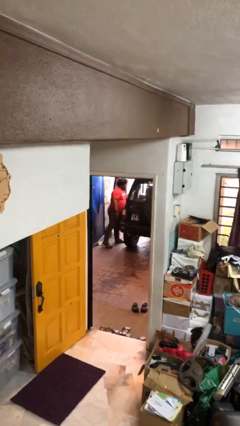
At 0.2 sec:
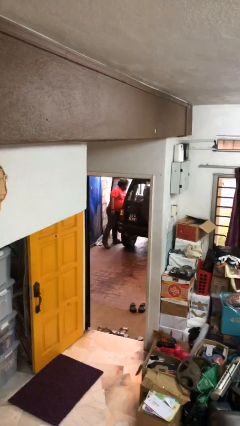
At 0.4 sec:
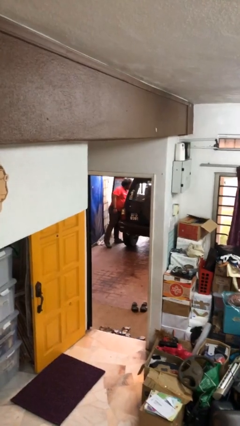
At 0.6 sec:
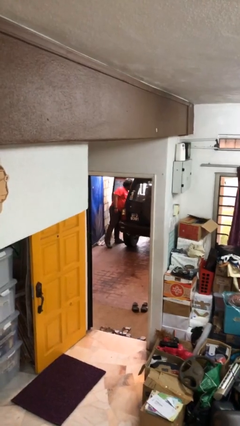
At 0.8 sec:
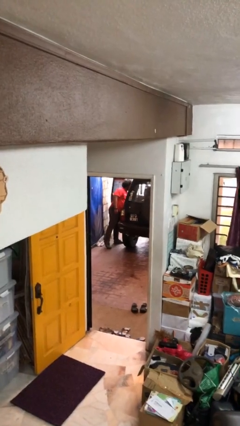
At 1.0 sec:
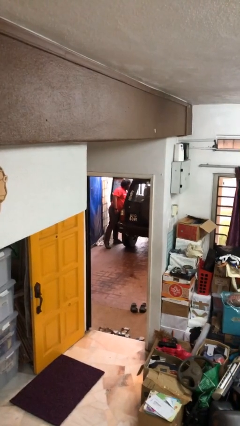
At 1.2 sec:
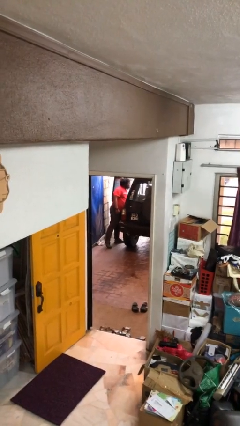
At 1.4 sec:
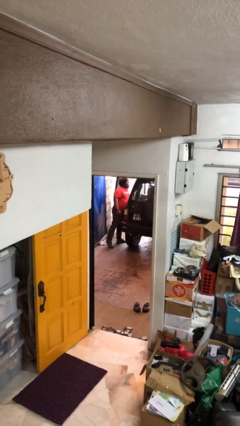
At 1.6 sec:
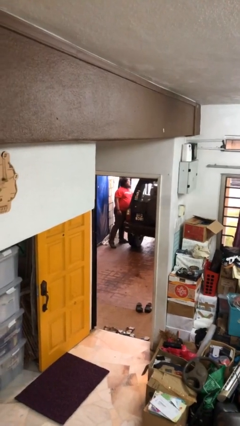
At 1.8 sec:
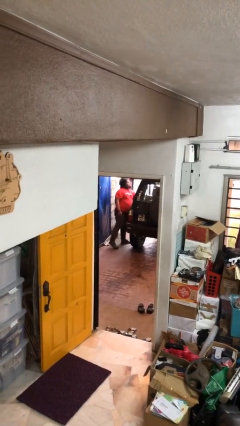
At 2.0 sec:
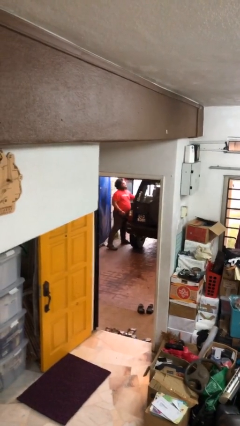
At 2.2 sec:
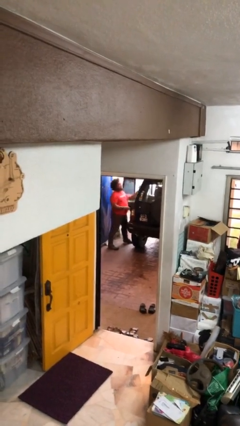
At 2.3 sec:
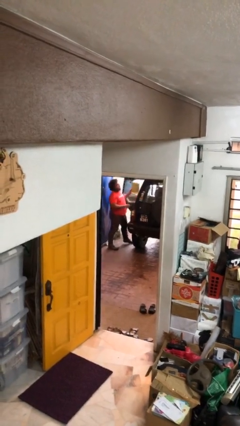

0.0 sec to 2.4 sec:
person loads car

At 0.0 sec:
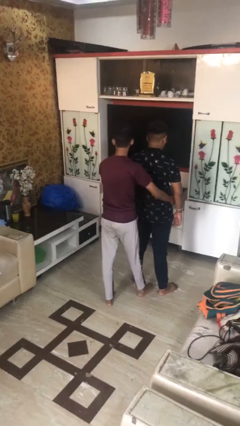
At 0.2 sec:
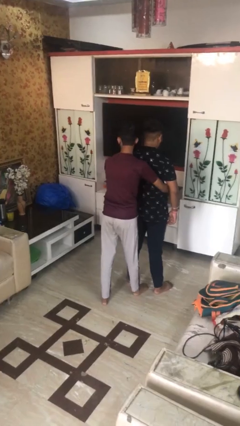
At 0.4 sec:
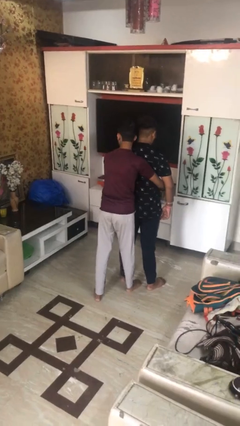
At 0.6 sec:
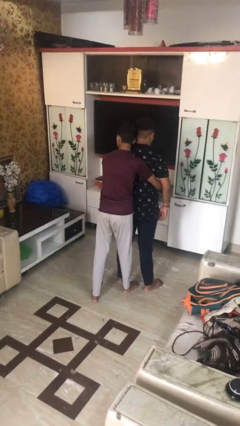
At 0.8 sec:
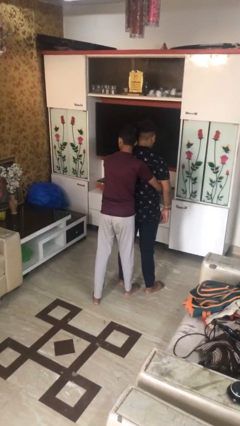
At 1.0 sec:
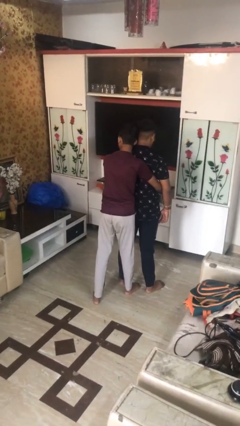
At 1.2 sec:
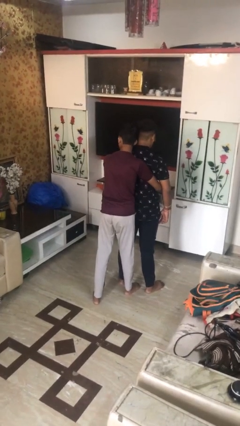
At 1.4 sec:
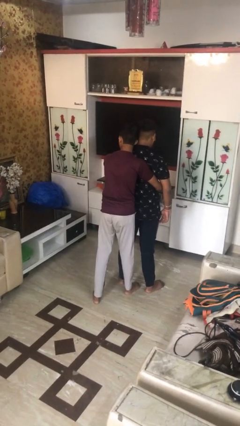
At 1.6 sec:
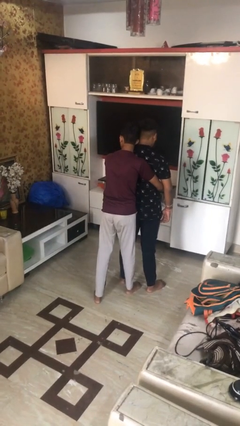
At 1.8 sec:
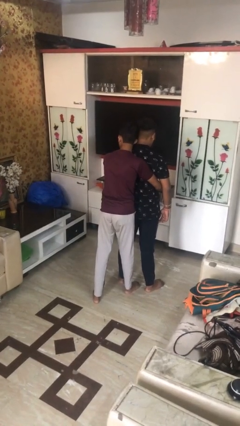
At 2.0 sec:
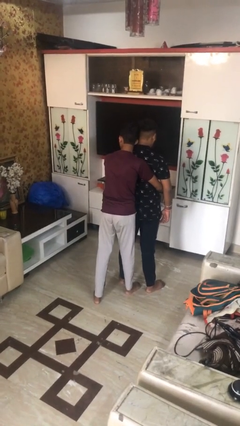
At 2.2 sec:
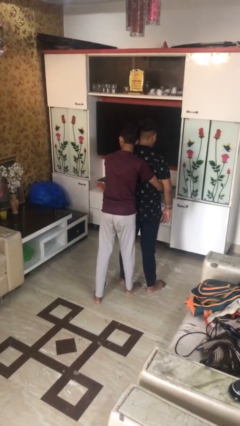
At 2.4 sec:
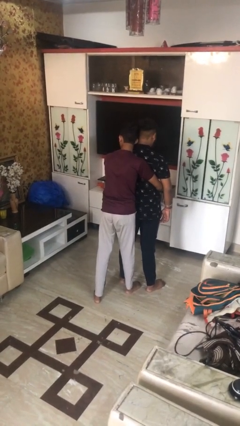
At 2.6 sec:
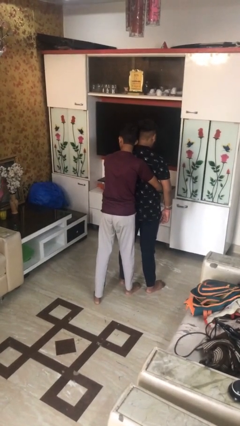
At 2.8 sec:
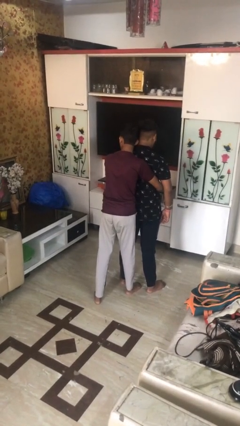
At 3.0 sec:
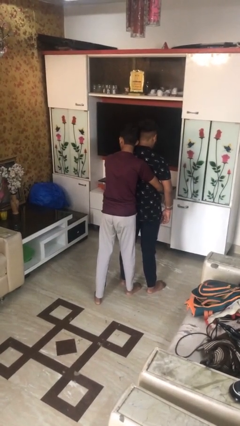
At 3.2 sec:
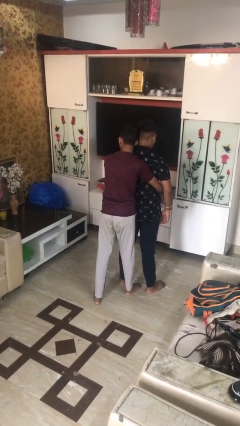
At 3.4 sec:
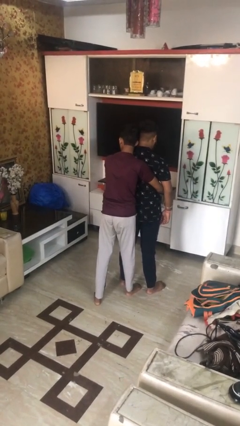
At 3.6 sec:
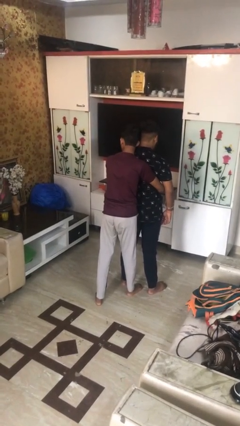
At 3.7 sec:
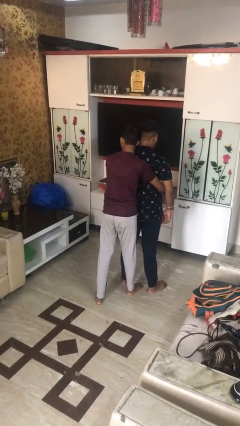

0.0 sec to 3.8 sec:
person hugs person from behind

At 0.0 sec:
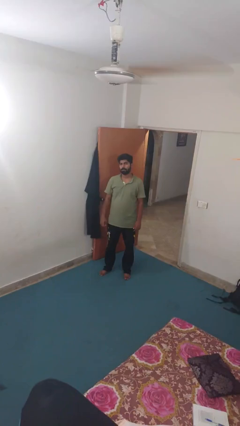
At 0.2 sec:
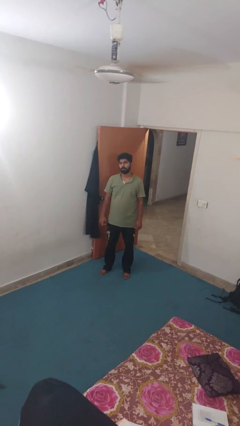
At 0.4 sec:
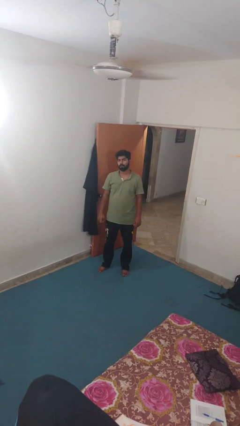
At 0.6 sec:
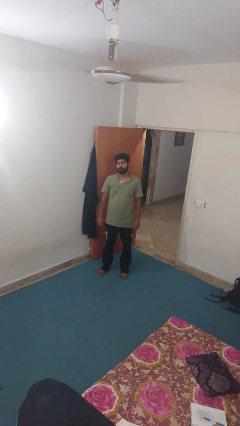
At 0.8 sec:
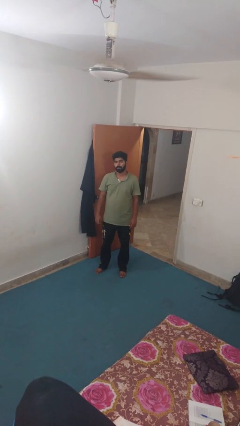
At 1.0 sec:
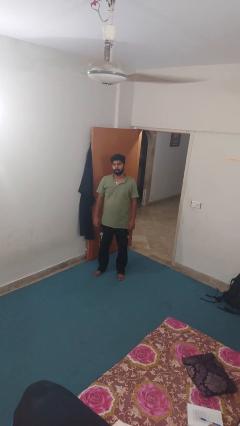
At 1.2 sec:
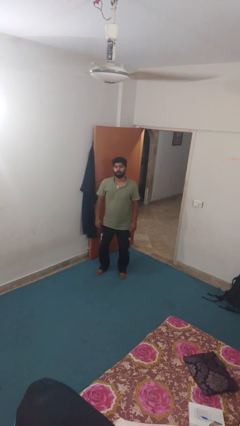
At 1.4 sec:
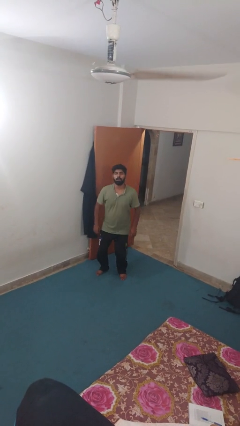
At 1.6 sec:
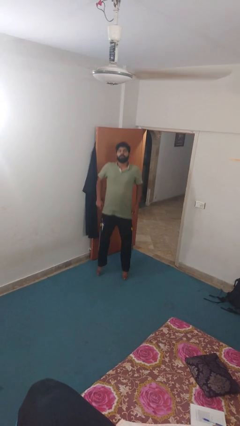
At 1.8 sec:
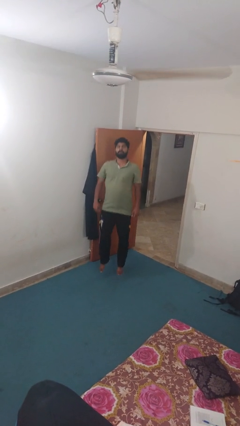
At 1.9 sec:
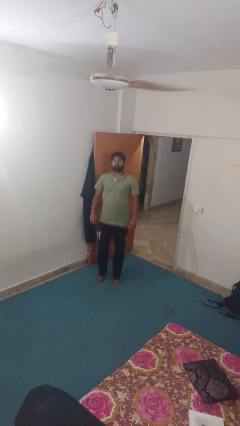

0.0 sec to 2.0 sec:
person jumps

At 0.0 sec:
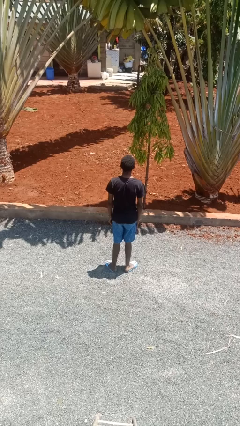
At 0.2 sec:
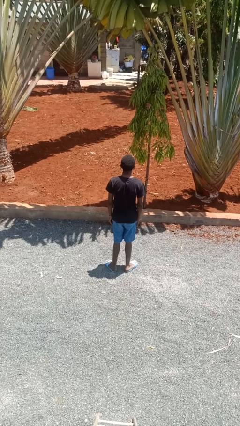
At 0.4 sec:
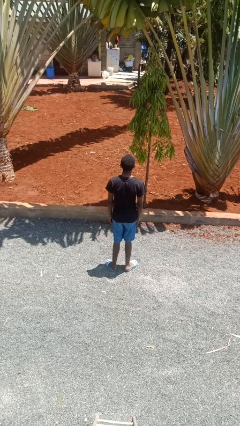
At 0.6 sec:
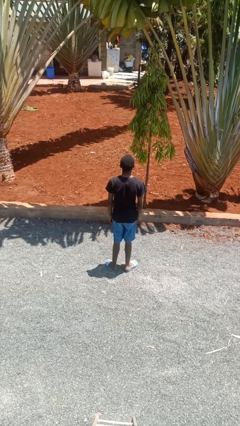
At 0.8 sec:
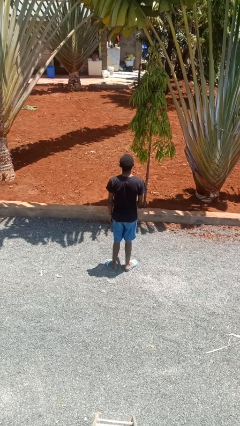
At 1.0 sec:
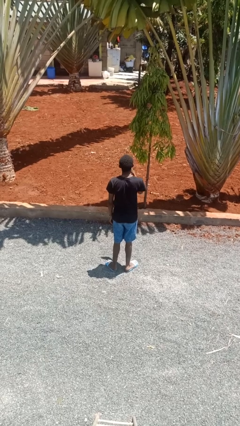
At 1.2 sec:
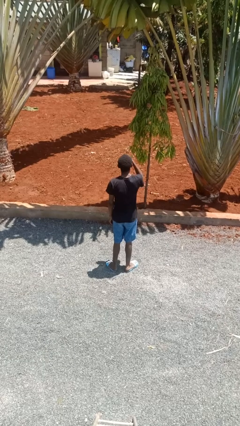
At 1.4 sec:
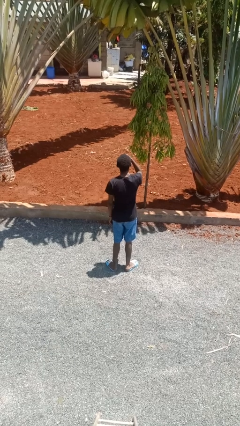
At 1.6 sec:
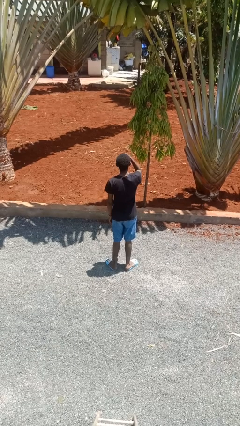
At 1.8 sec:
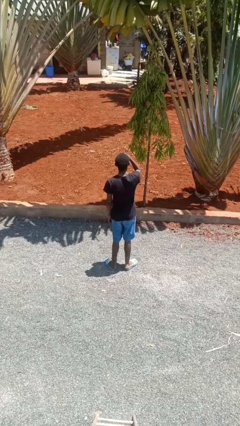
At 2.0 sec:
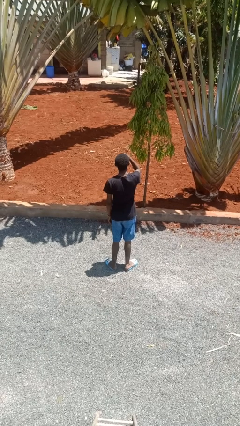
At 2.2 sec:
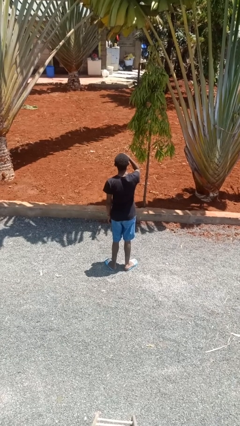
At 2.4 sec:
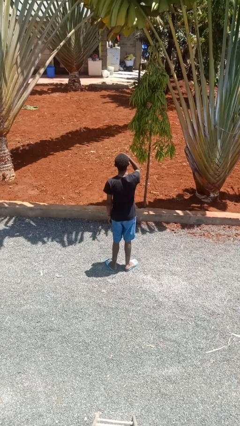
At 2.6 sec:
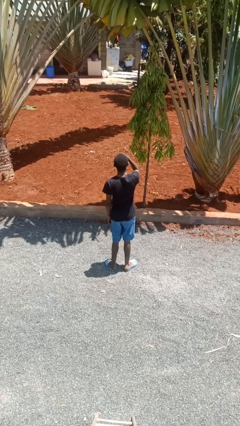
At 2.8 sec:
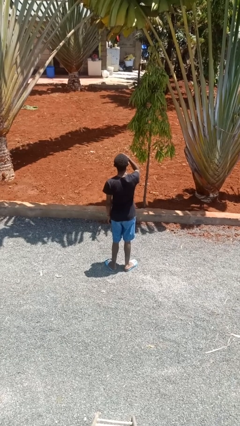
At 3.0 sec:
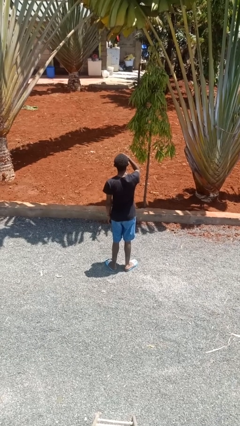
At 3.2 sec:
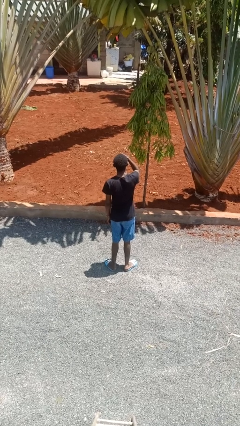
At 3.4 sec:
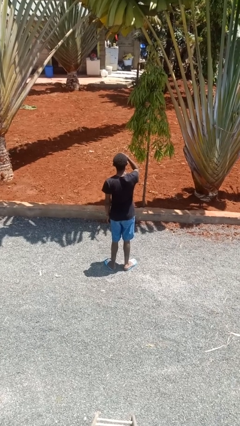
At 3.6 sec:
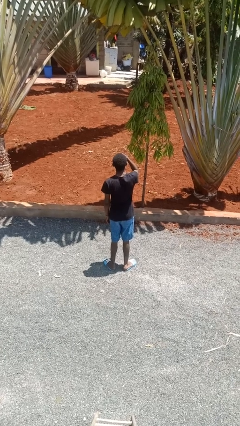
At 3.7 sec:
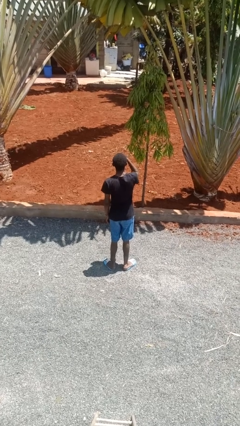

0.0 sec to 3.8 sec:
person shades eyes

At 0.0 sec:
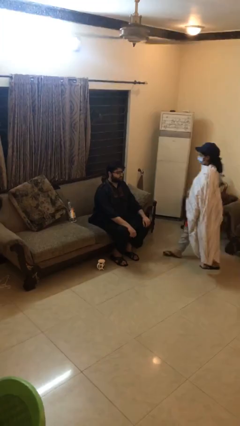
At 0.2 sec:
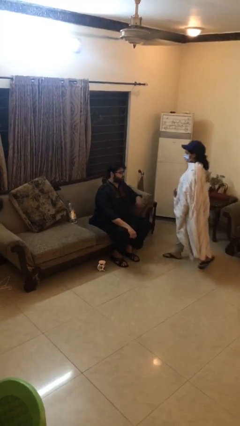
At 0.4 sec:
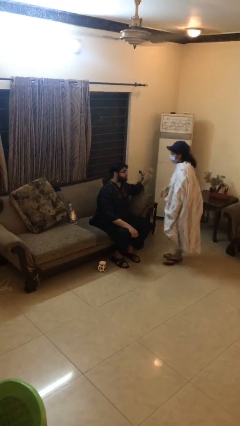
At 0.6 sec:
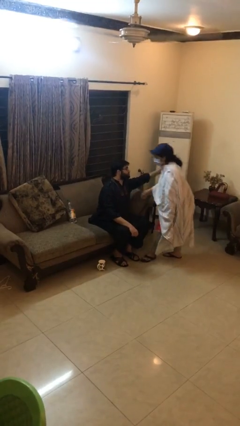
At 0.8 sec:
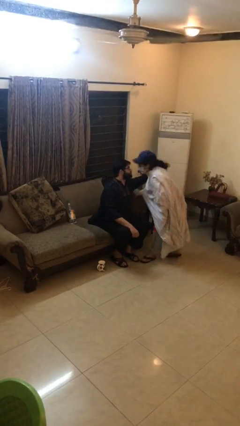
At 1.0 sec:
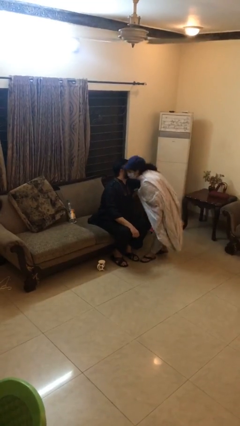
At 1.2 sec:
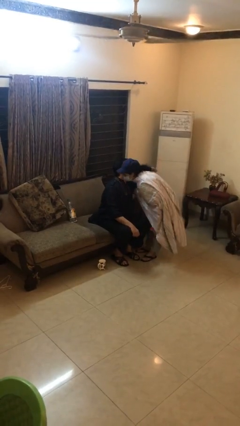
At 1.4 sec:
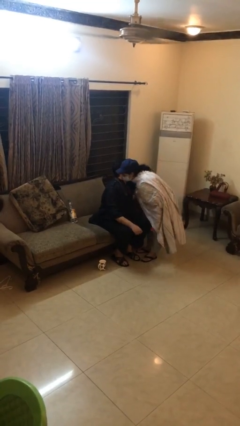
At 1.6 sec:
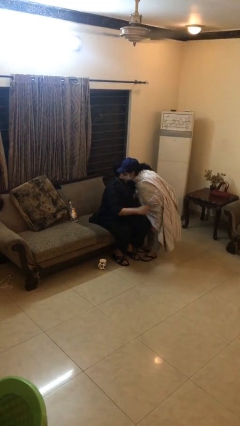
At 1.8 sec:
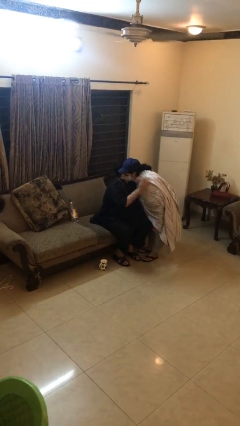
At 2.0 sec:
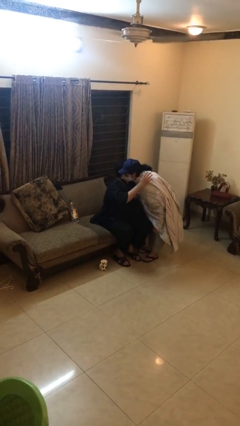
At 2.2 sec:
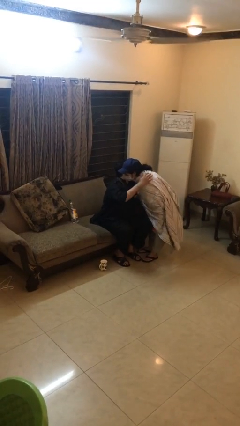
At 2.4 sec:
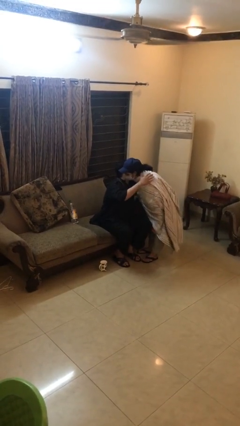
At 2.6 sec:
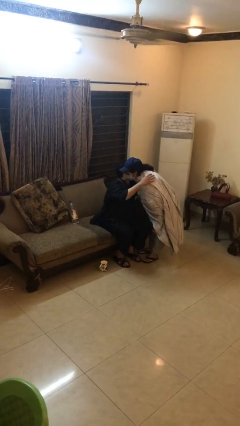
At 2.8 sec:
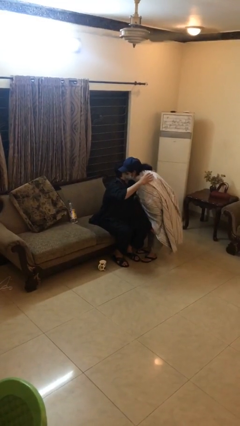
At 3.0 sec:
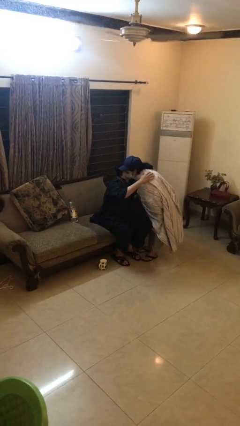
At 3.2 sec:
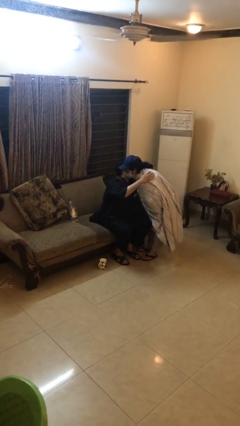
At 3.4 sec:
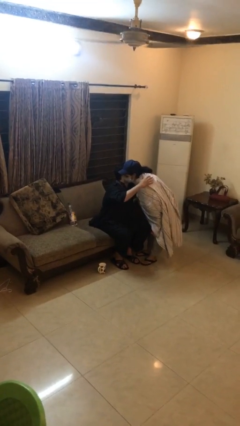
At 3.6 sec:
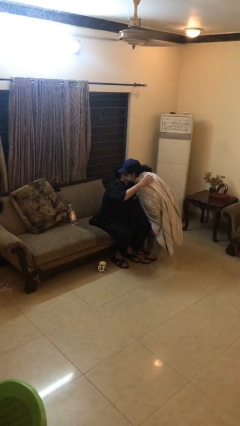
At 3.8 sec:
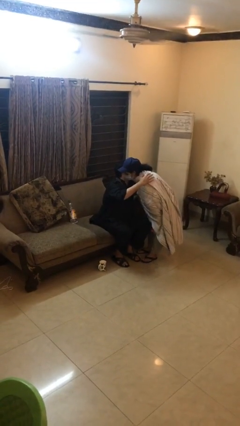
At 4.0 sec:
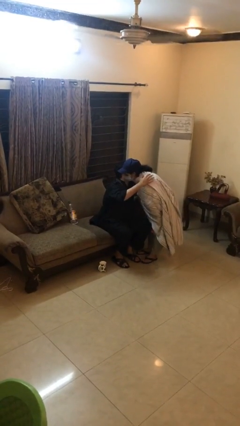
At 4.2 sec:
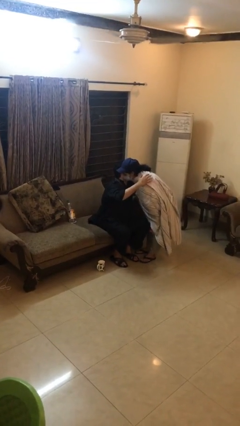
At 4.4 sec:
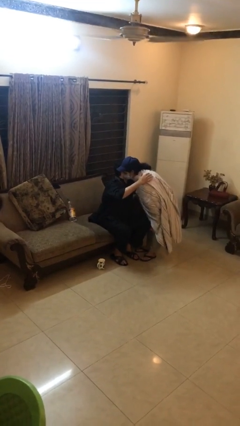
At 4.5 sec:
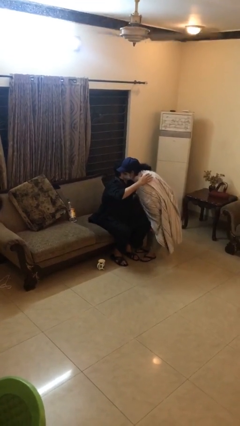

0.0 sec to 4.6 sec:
person embraces person

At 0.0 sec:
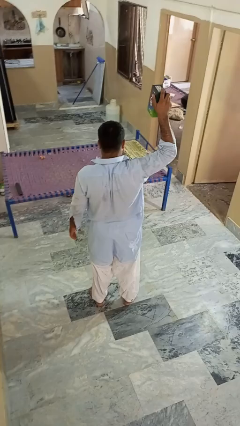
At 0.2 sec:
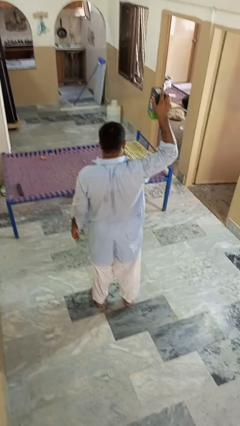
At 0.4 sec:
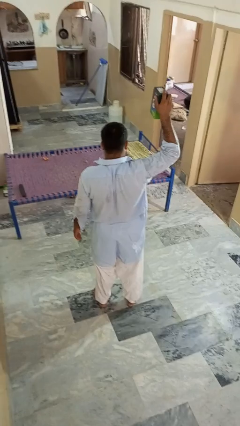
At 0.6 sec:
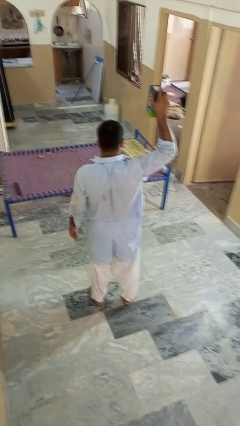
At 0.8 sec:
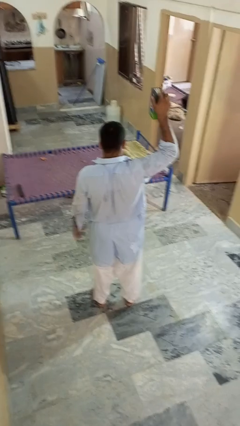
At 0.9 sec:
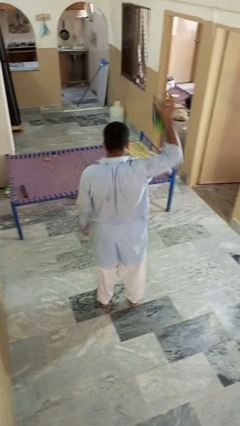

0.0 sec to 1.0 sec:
person drops object
